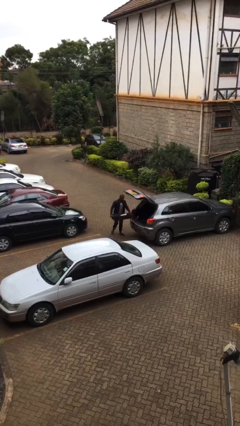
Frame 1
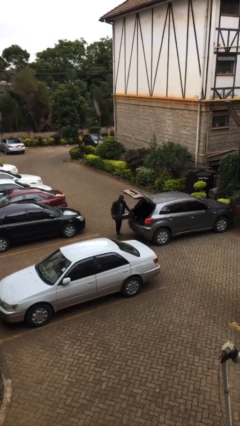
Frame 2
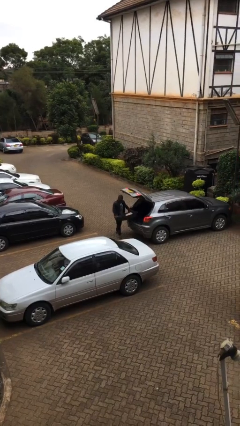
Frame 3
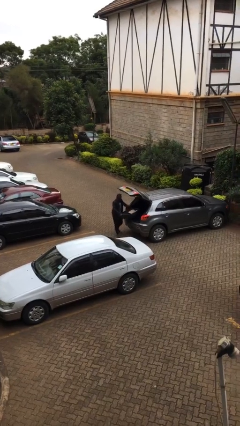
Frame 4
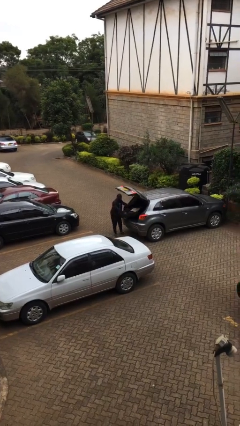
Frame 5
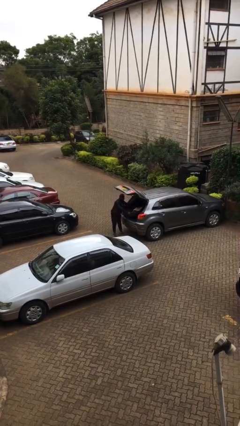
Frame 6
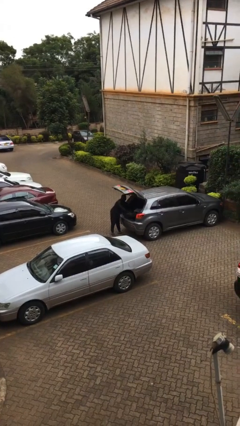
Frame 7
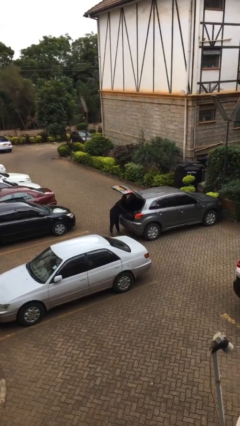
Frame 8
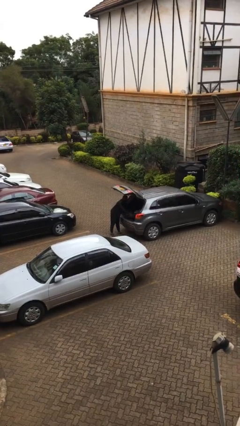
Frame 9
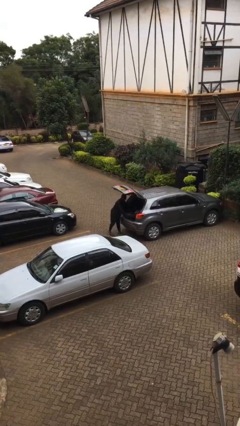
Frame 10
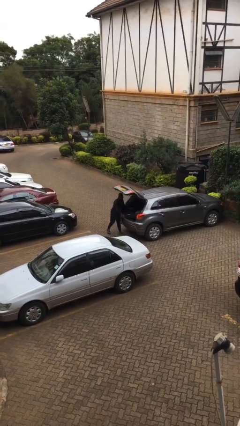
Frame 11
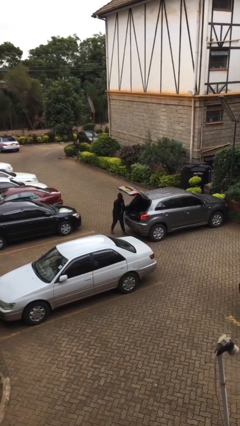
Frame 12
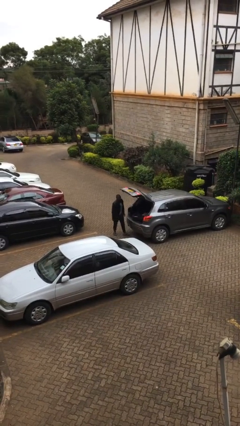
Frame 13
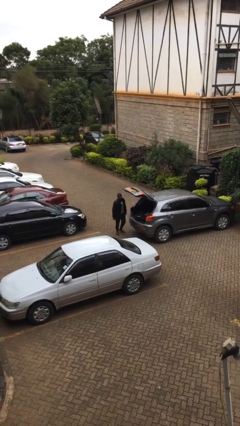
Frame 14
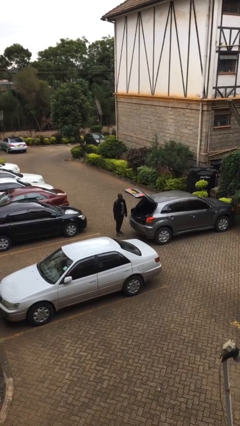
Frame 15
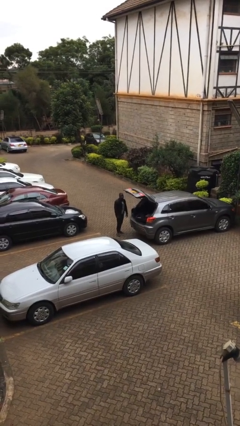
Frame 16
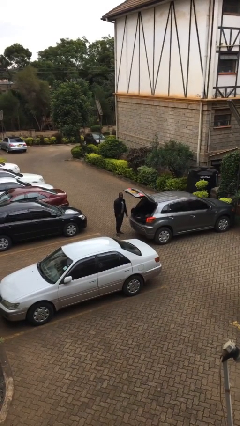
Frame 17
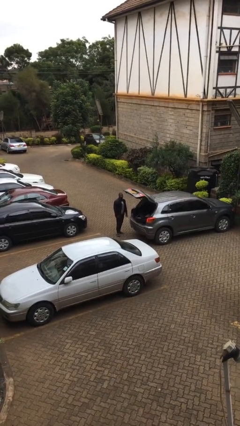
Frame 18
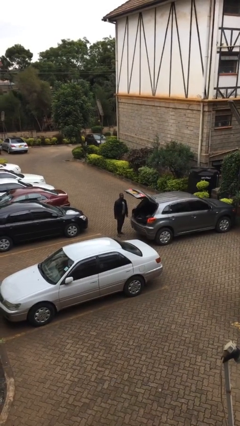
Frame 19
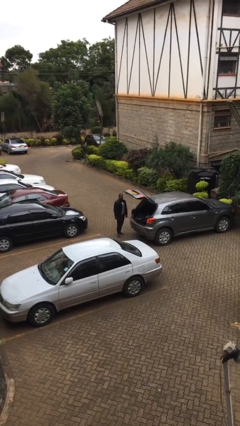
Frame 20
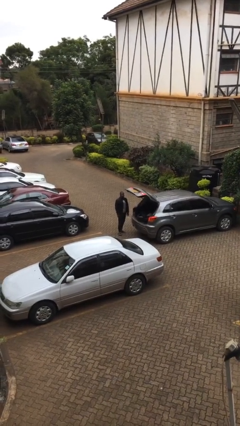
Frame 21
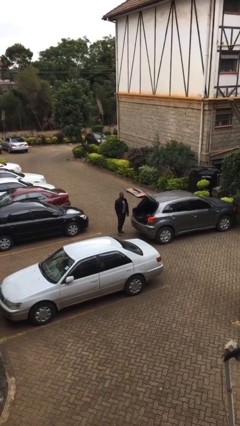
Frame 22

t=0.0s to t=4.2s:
person loads car

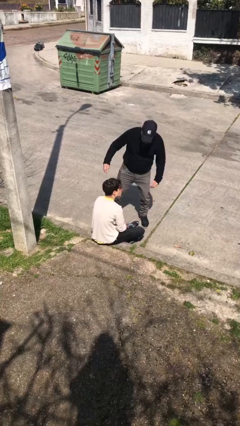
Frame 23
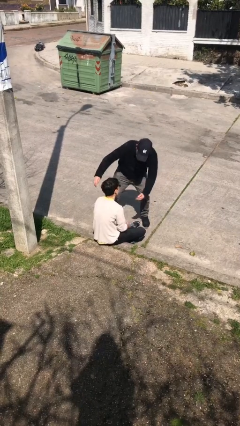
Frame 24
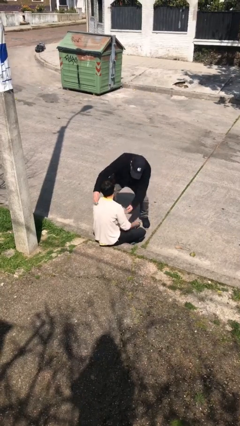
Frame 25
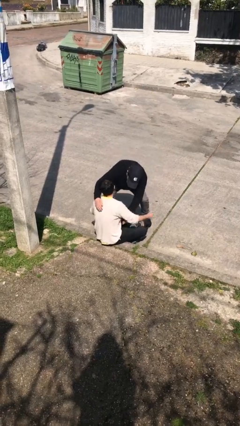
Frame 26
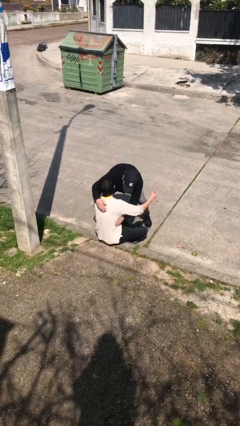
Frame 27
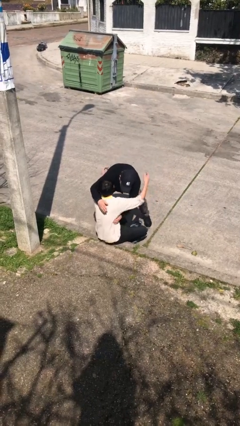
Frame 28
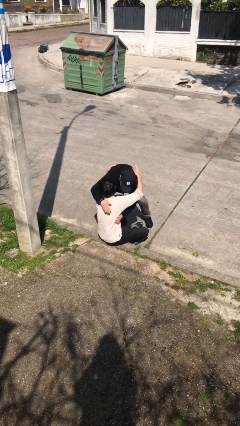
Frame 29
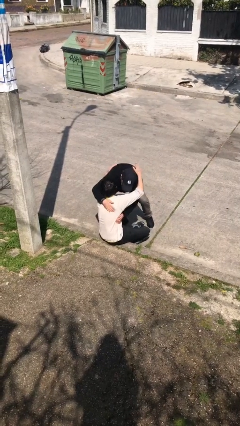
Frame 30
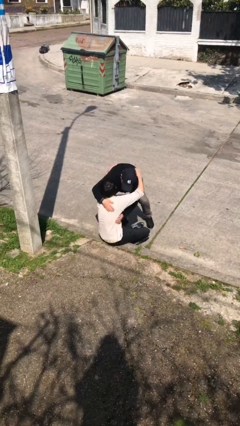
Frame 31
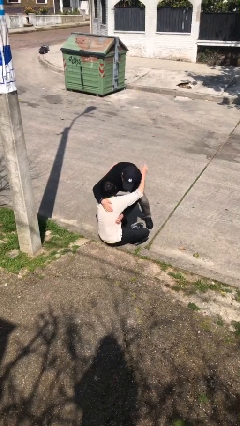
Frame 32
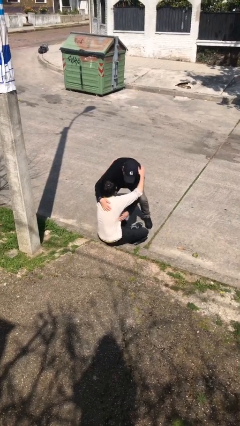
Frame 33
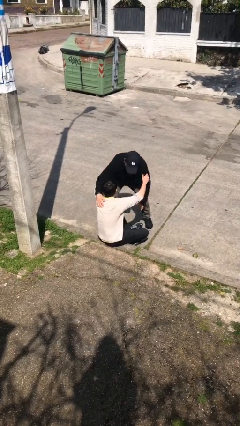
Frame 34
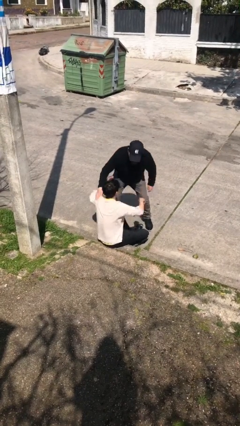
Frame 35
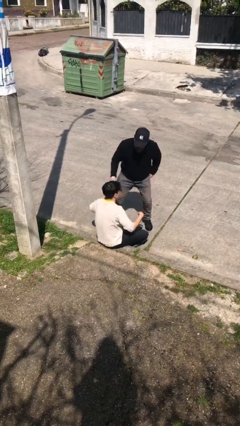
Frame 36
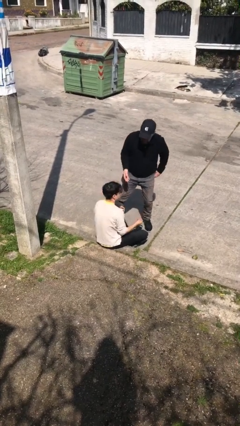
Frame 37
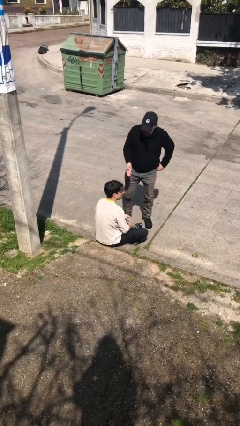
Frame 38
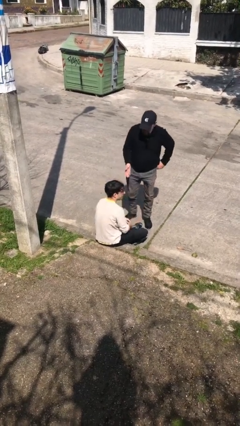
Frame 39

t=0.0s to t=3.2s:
person embraces person

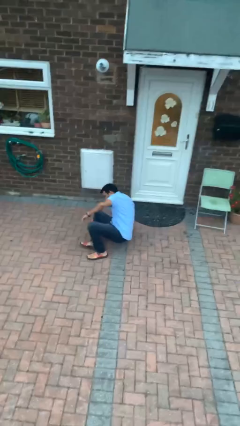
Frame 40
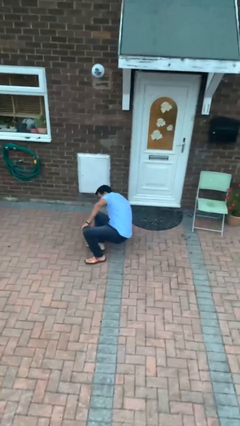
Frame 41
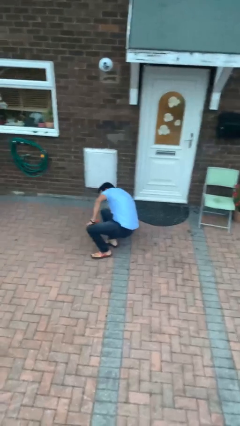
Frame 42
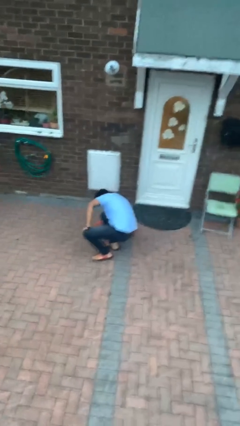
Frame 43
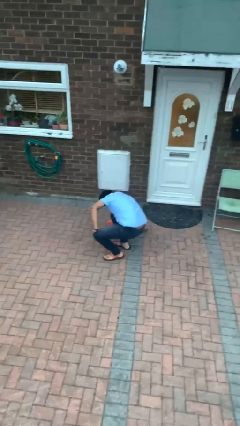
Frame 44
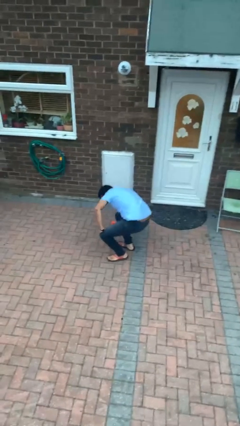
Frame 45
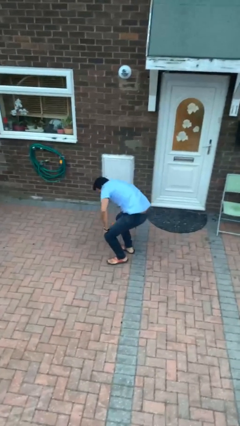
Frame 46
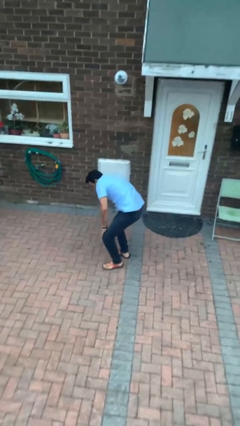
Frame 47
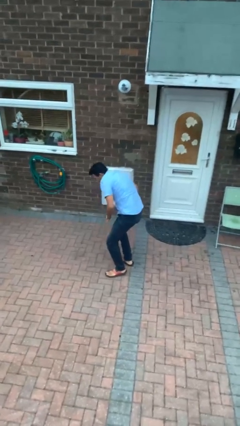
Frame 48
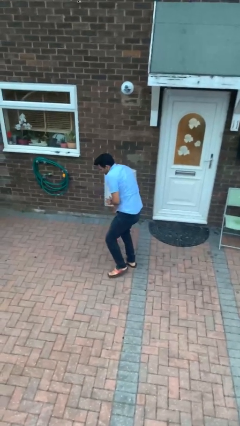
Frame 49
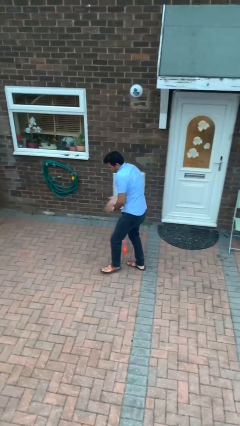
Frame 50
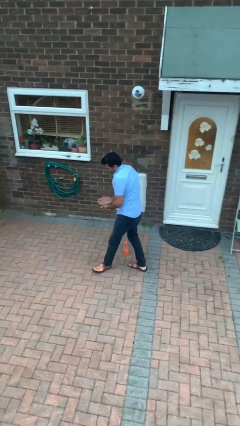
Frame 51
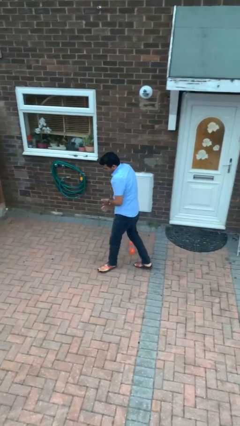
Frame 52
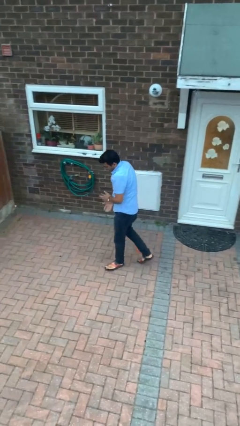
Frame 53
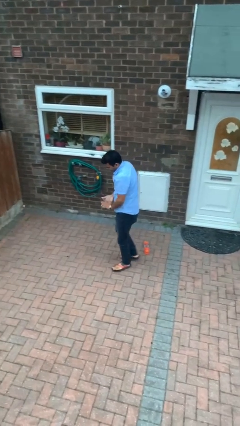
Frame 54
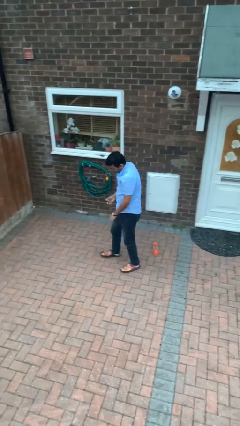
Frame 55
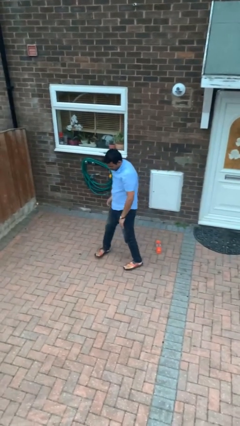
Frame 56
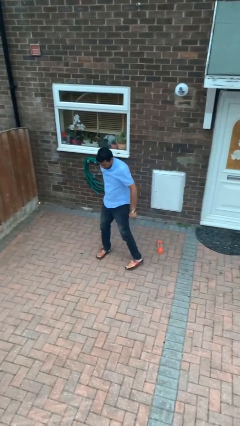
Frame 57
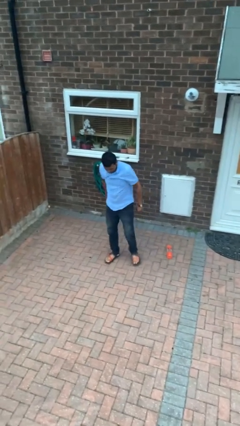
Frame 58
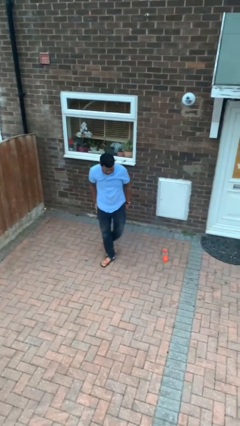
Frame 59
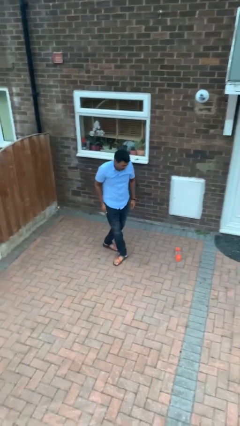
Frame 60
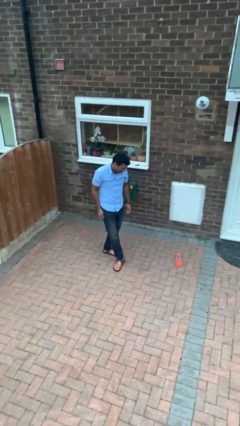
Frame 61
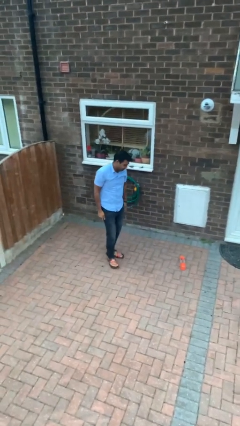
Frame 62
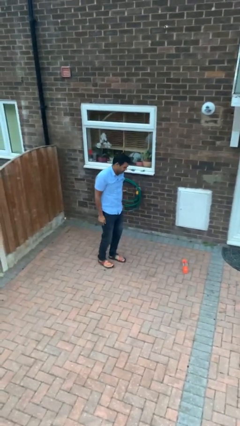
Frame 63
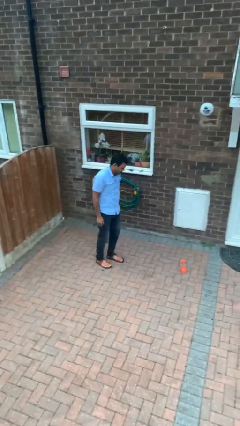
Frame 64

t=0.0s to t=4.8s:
person stands up from floor

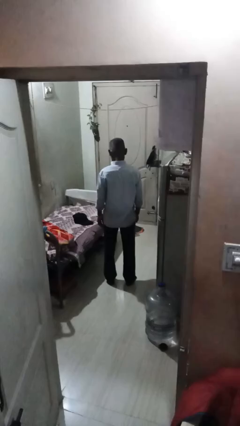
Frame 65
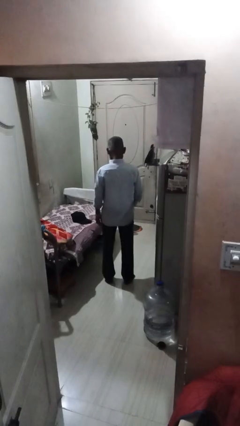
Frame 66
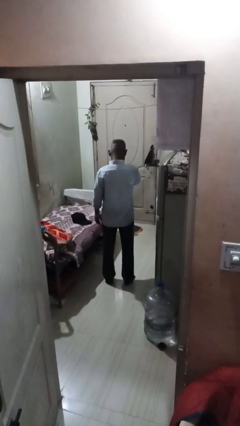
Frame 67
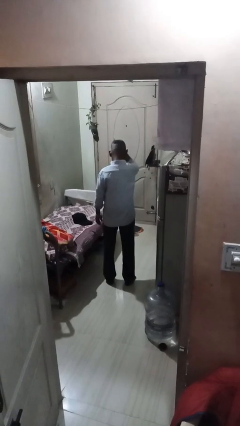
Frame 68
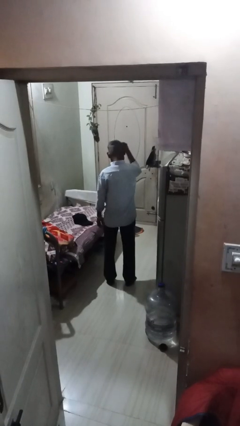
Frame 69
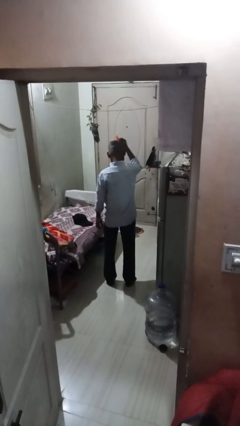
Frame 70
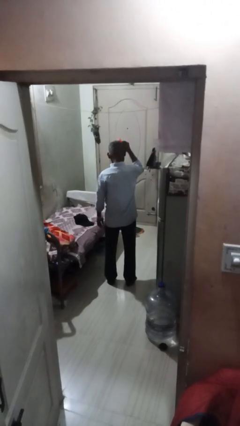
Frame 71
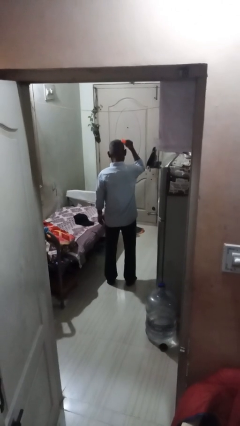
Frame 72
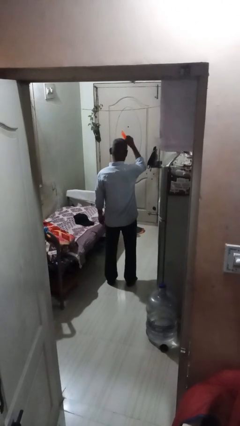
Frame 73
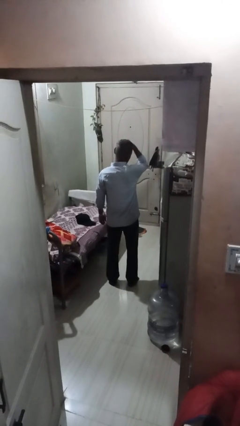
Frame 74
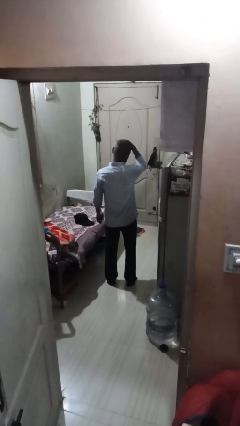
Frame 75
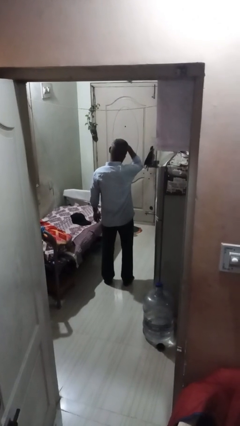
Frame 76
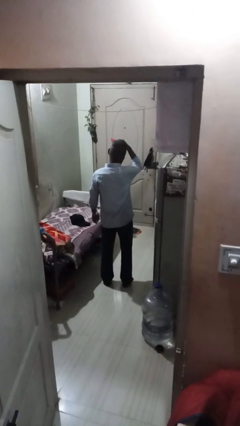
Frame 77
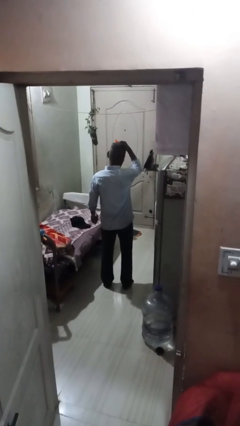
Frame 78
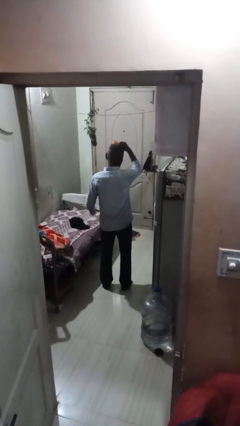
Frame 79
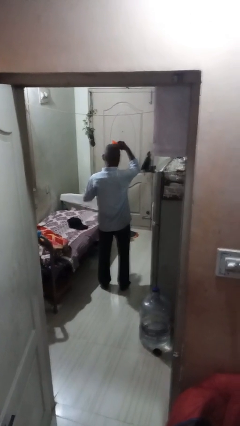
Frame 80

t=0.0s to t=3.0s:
person brushes hair

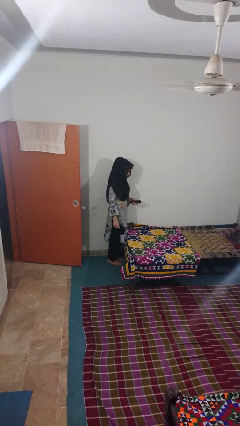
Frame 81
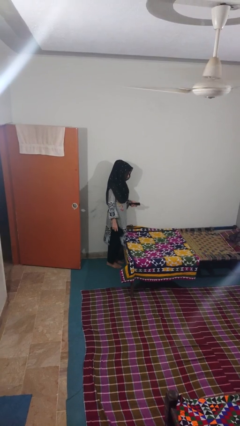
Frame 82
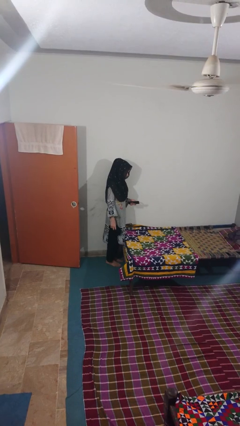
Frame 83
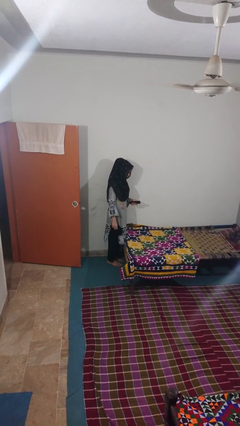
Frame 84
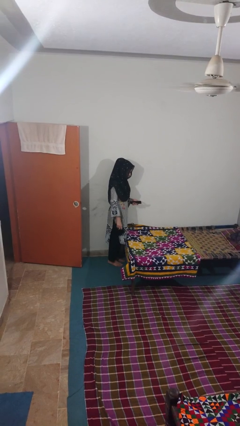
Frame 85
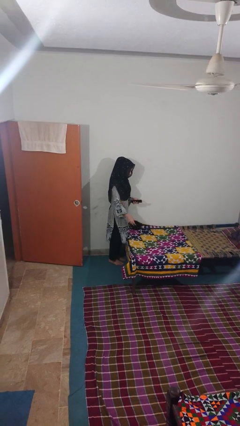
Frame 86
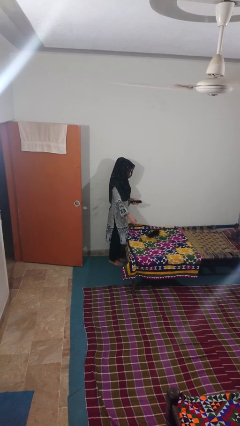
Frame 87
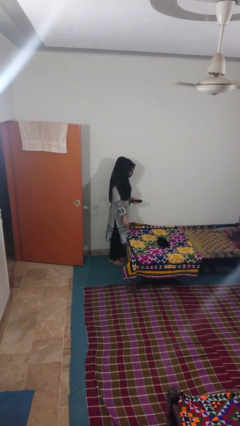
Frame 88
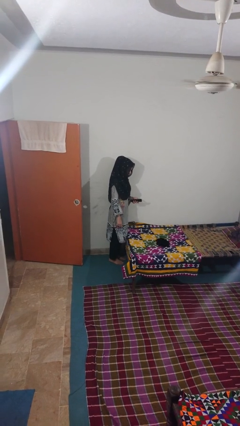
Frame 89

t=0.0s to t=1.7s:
person throws object on bed

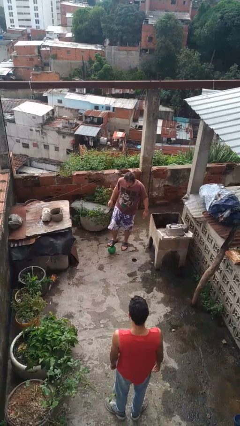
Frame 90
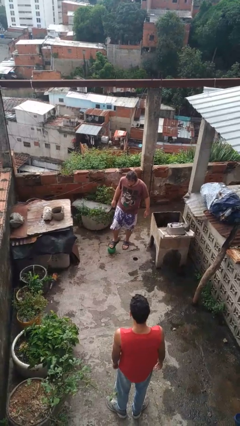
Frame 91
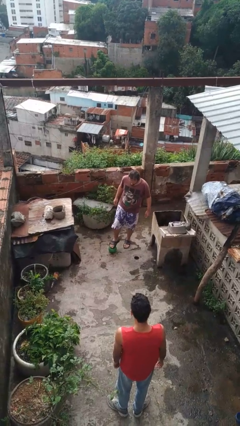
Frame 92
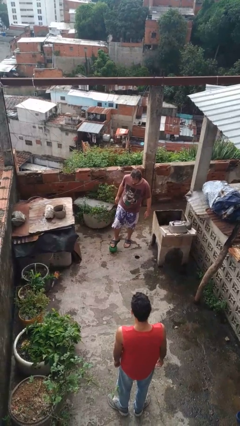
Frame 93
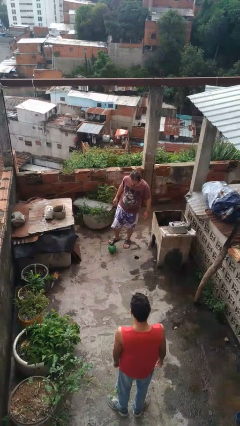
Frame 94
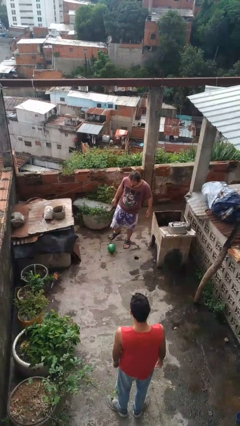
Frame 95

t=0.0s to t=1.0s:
person kicks object to person
